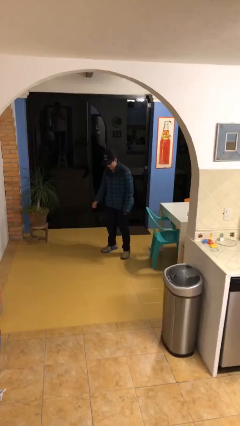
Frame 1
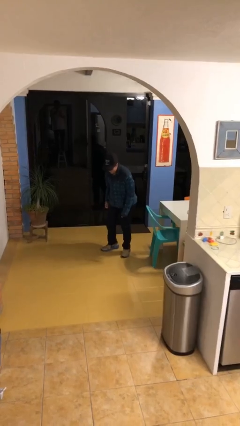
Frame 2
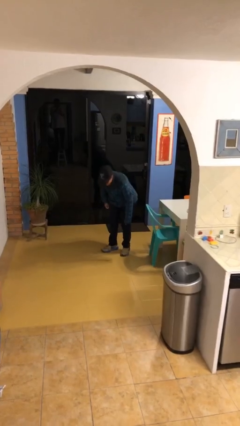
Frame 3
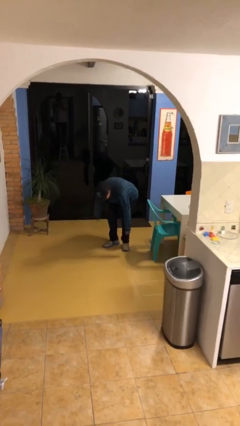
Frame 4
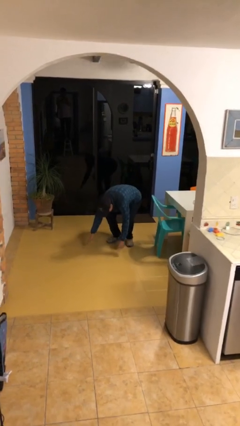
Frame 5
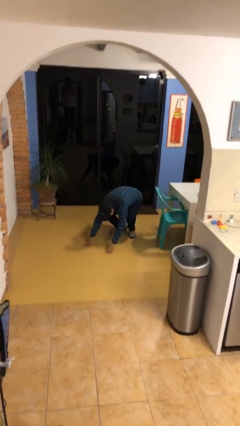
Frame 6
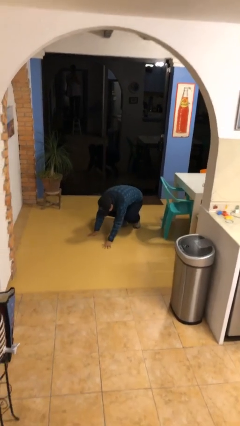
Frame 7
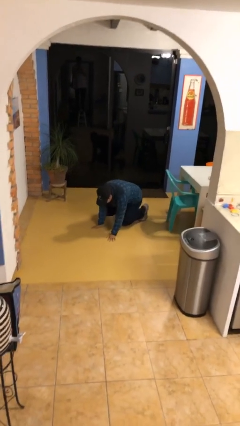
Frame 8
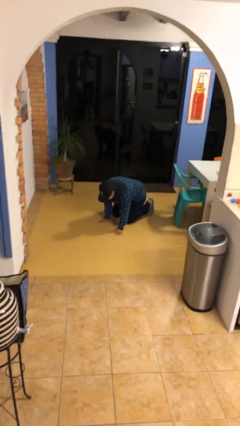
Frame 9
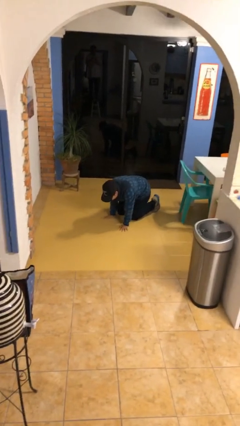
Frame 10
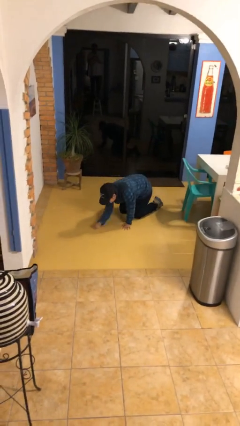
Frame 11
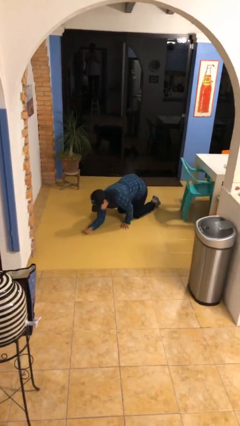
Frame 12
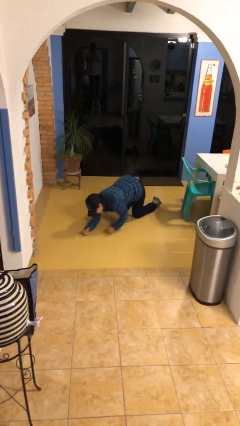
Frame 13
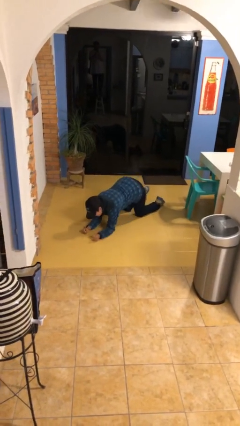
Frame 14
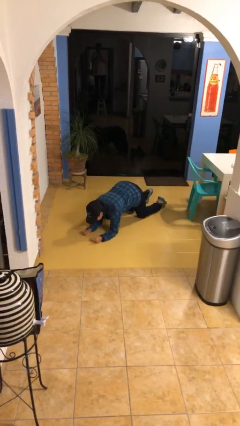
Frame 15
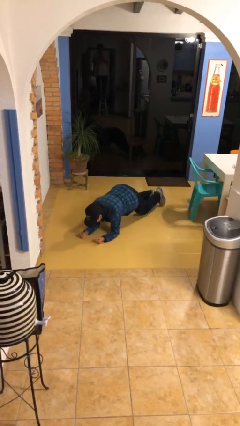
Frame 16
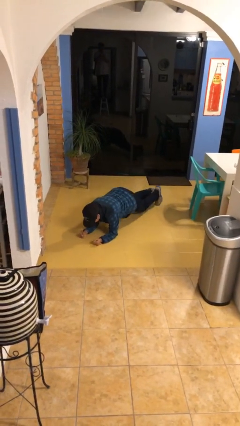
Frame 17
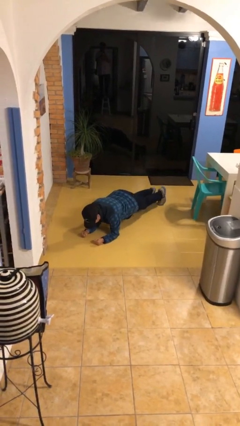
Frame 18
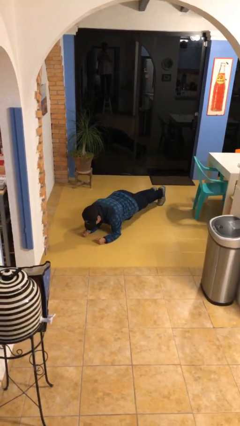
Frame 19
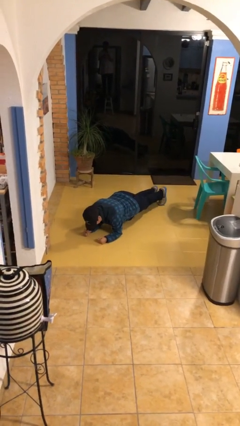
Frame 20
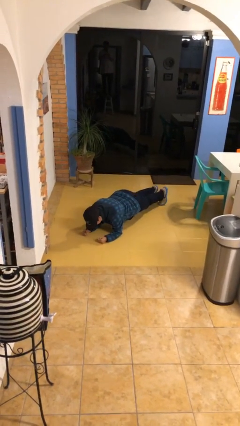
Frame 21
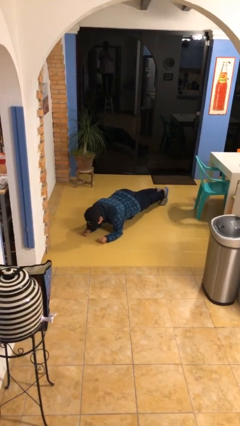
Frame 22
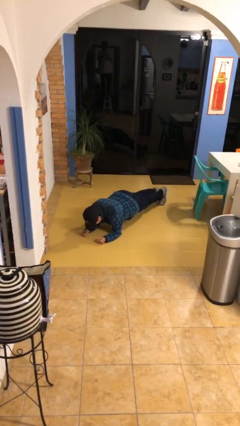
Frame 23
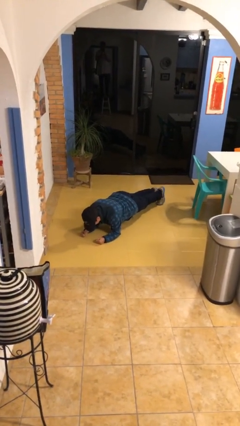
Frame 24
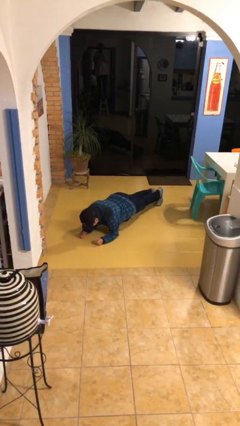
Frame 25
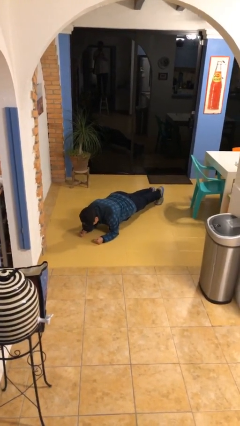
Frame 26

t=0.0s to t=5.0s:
person exercises with plank

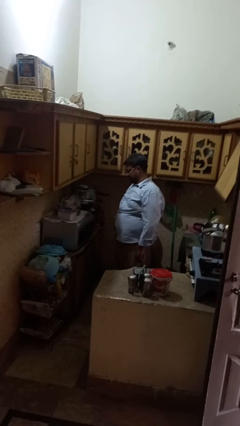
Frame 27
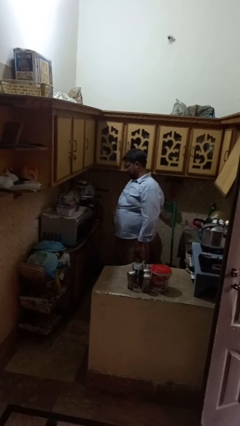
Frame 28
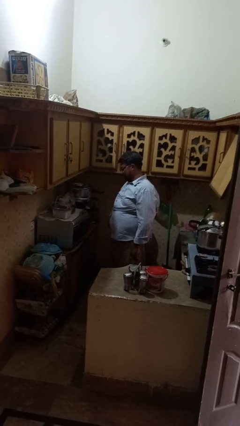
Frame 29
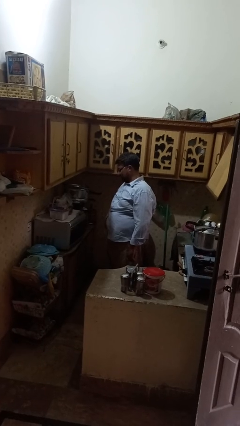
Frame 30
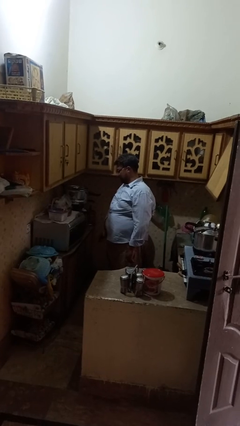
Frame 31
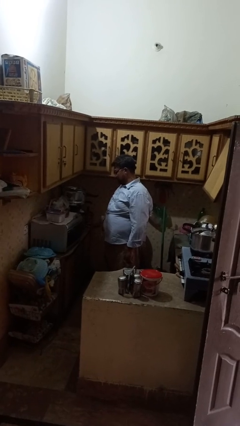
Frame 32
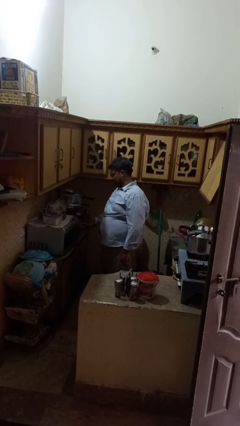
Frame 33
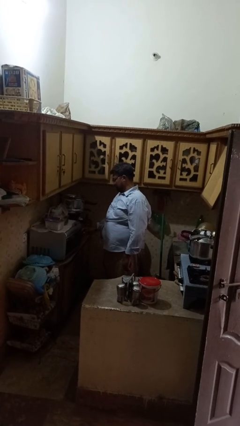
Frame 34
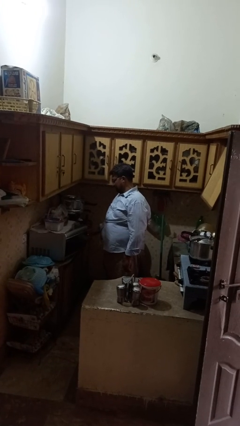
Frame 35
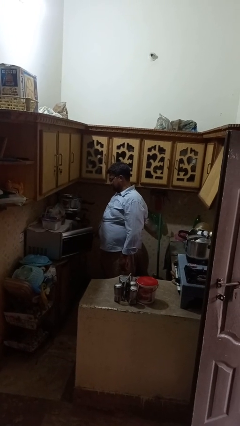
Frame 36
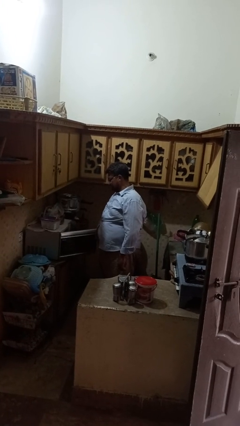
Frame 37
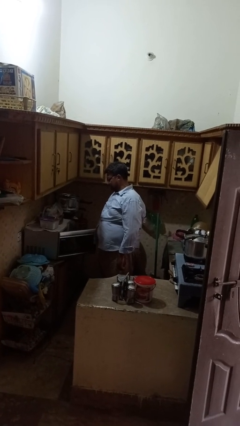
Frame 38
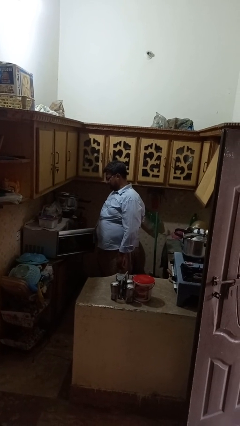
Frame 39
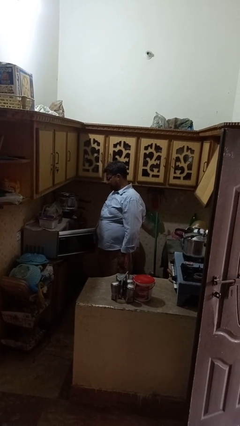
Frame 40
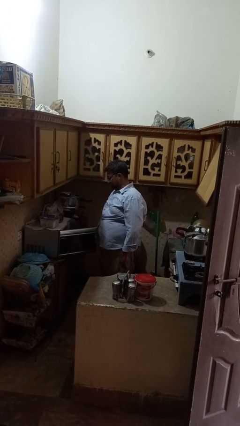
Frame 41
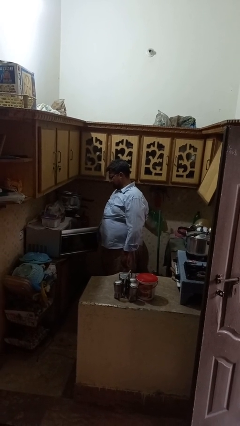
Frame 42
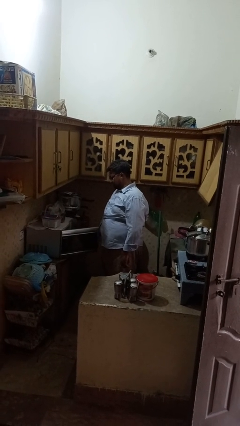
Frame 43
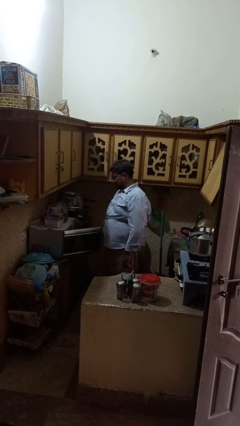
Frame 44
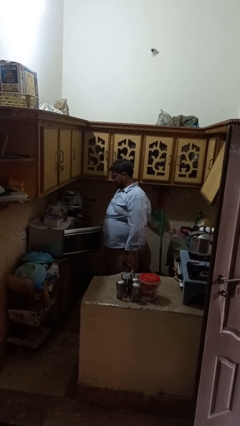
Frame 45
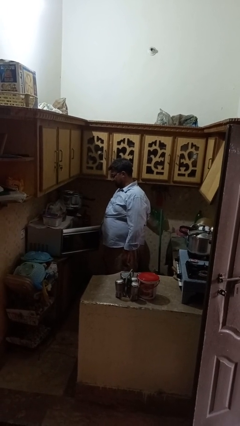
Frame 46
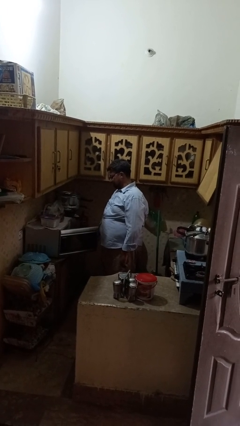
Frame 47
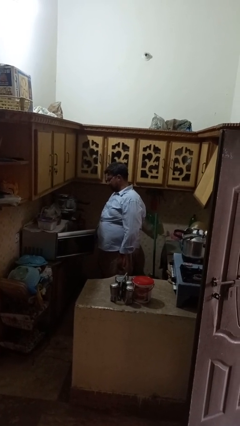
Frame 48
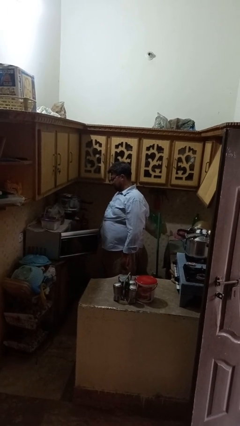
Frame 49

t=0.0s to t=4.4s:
person opens microwave

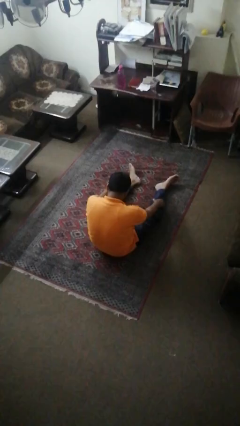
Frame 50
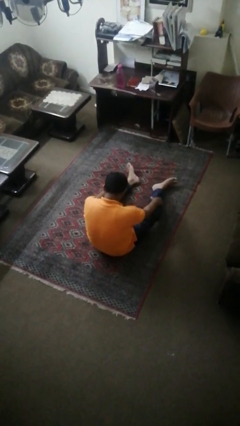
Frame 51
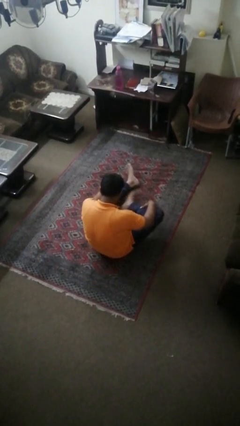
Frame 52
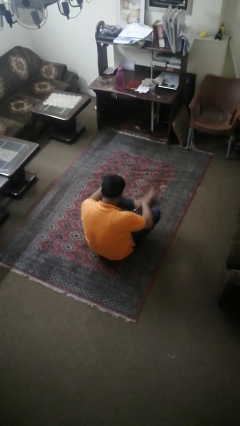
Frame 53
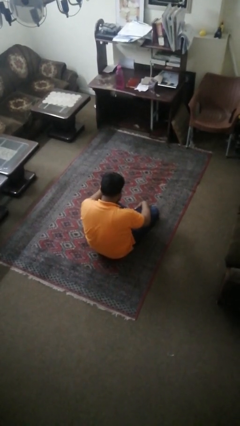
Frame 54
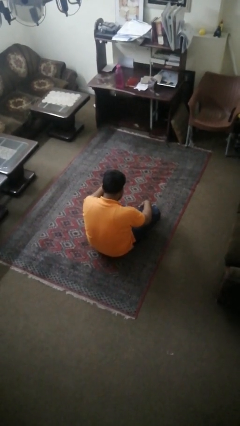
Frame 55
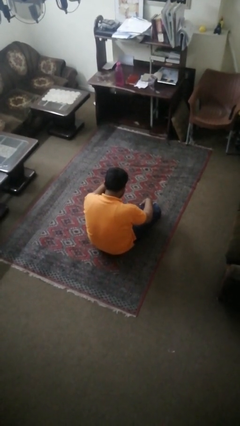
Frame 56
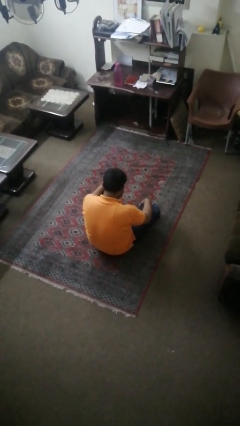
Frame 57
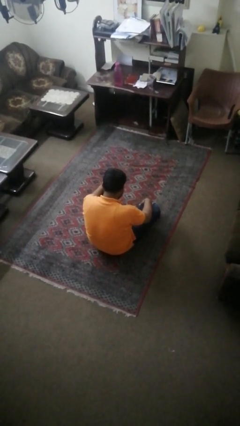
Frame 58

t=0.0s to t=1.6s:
person crosses legs

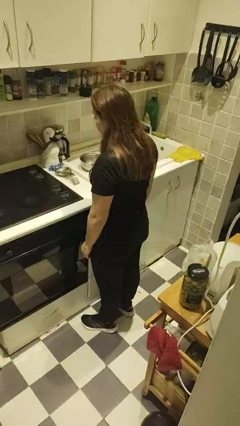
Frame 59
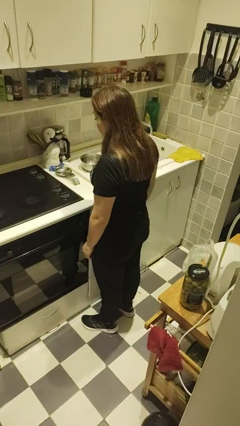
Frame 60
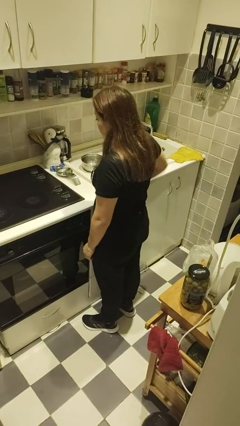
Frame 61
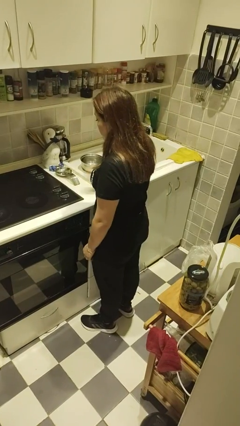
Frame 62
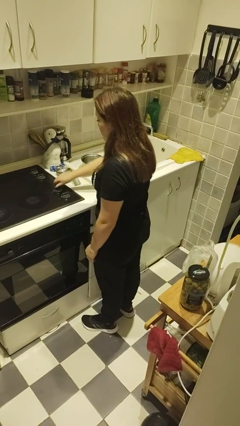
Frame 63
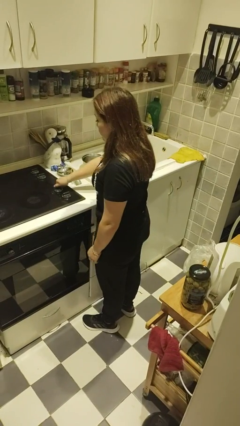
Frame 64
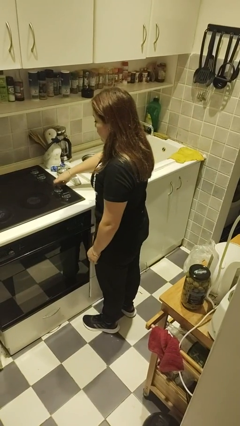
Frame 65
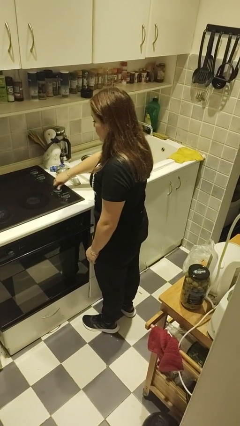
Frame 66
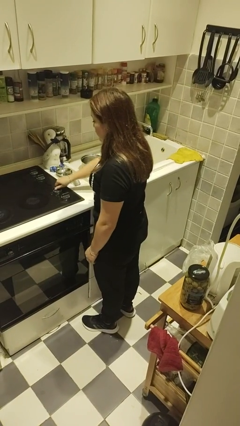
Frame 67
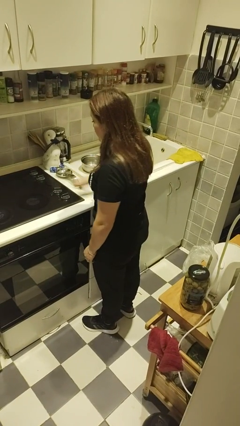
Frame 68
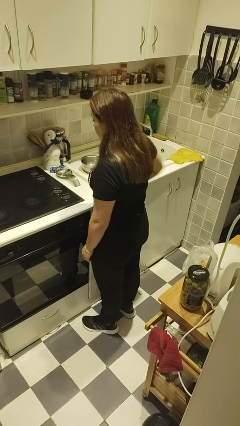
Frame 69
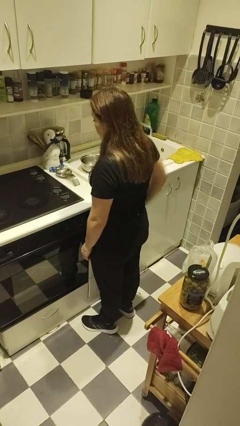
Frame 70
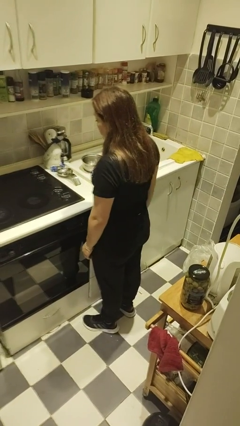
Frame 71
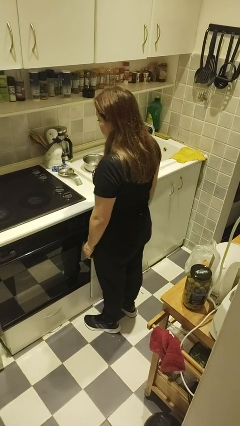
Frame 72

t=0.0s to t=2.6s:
person turns on stovetop

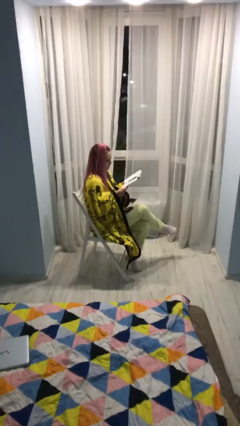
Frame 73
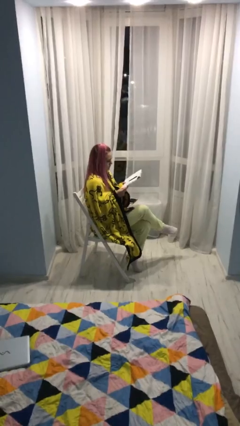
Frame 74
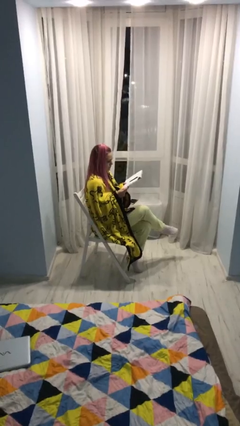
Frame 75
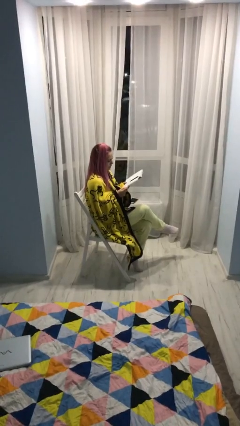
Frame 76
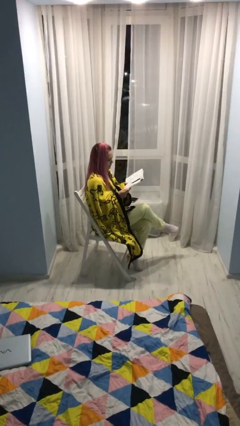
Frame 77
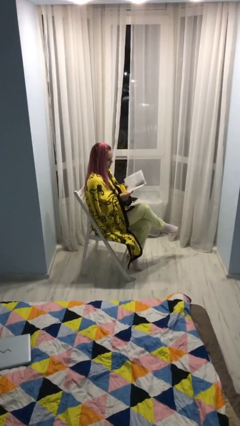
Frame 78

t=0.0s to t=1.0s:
person reads document

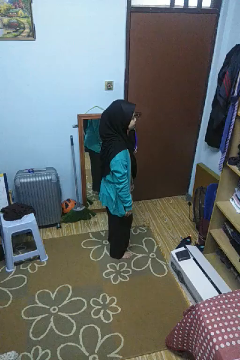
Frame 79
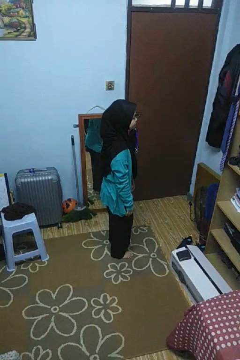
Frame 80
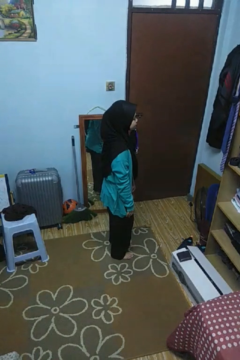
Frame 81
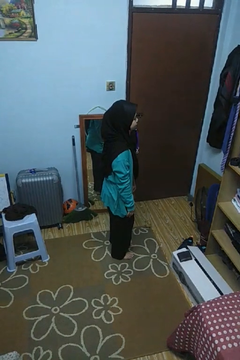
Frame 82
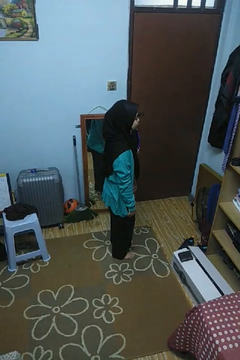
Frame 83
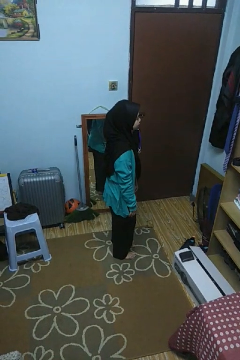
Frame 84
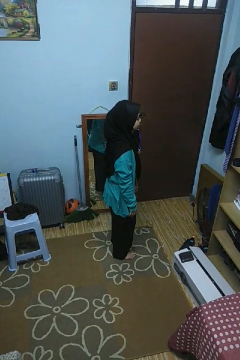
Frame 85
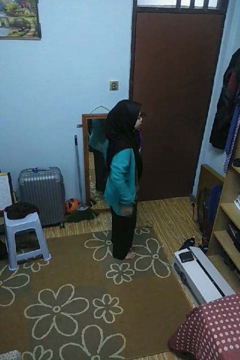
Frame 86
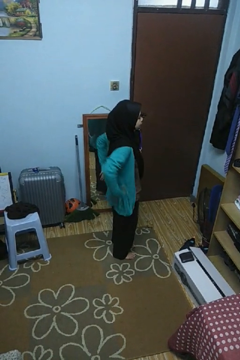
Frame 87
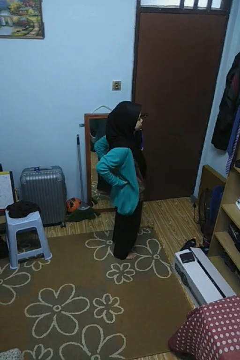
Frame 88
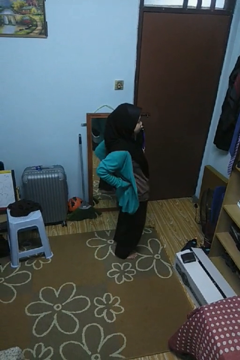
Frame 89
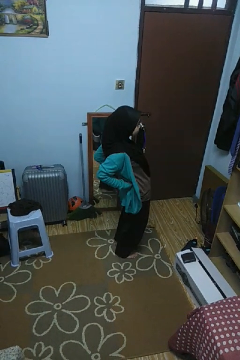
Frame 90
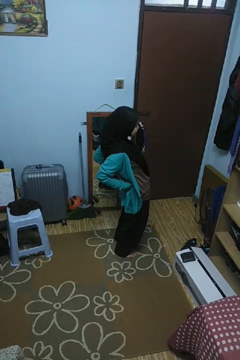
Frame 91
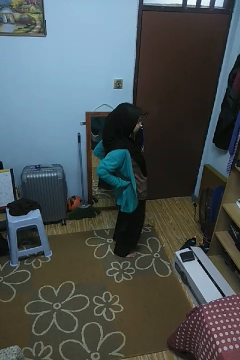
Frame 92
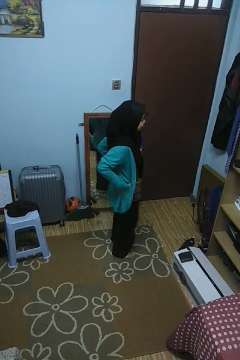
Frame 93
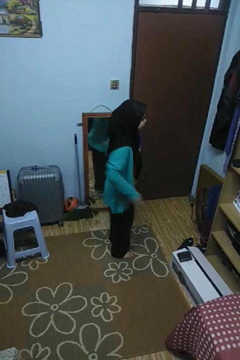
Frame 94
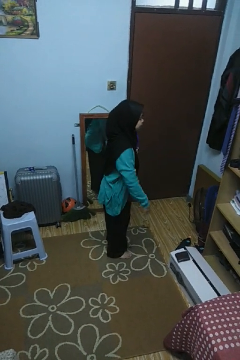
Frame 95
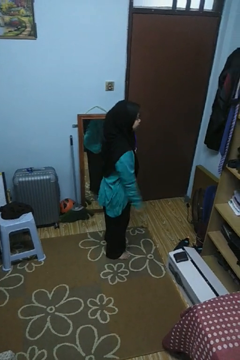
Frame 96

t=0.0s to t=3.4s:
person stretches back

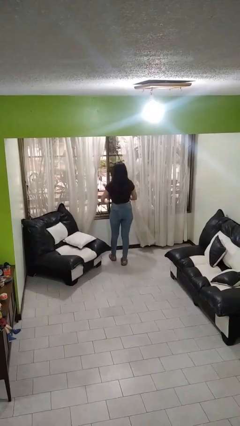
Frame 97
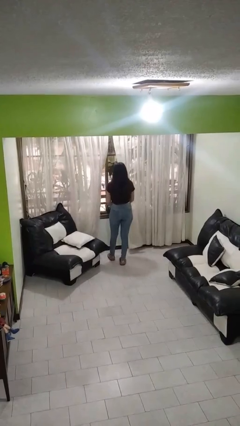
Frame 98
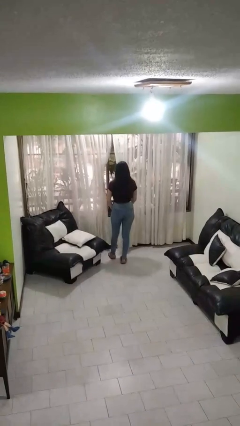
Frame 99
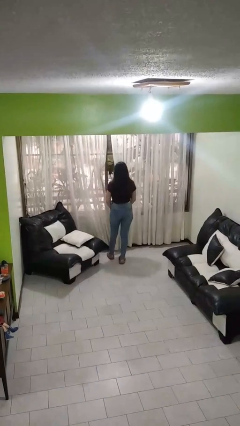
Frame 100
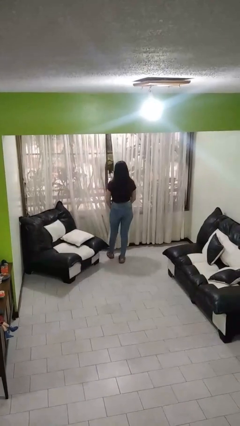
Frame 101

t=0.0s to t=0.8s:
person closes curtains
